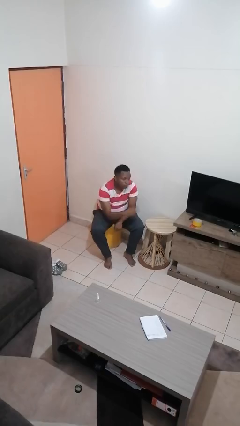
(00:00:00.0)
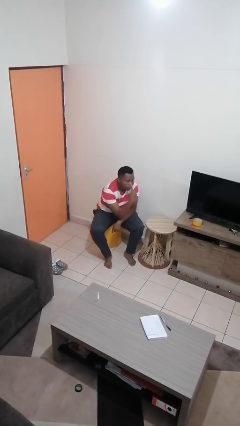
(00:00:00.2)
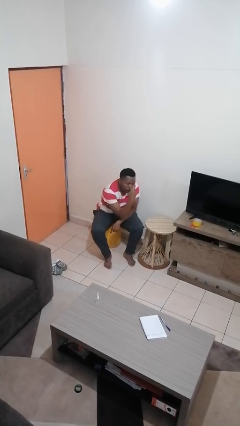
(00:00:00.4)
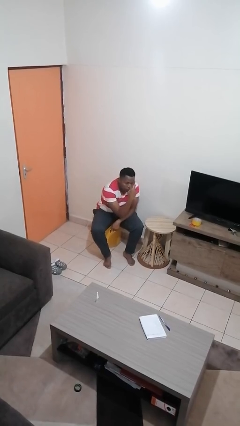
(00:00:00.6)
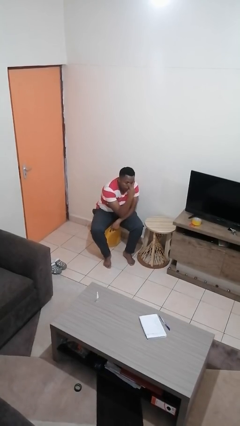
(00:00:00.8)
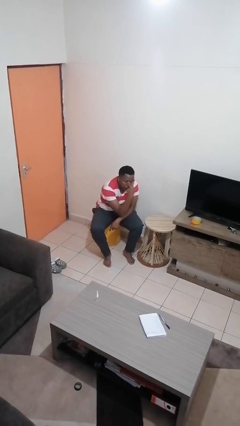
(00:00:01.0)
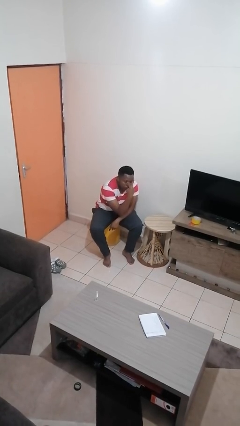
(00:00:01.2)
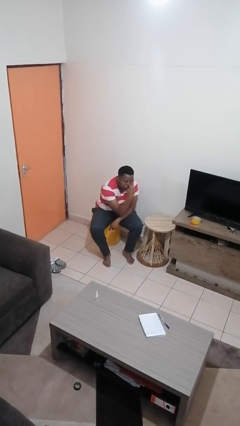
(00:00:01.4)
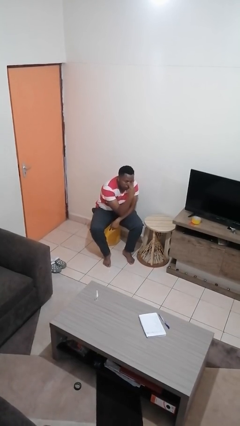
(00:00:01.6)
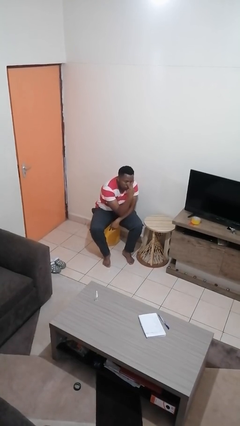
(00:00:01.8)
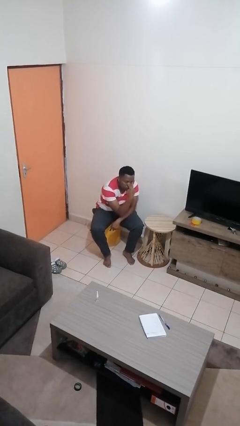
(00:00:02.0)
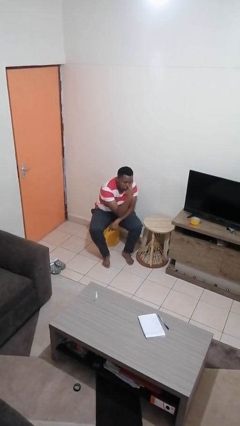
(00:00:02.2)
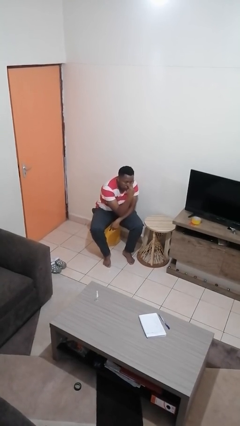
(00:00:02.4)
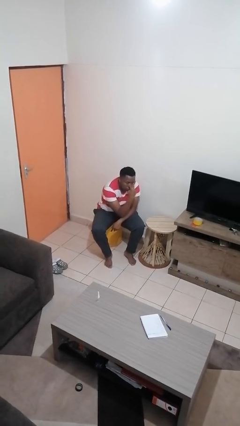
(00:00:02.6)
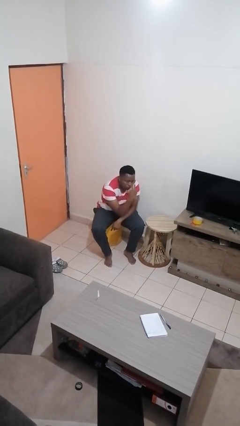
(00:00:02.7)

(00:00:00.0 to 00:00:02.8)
person gestures watch closely

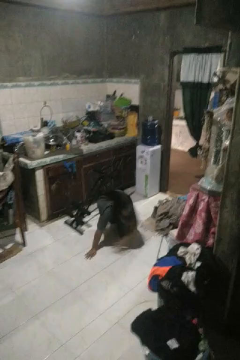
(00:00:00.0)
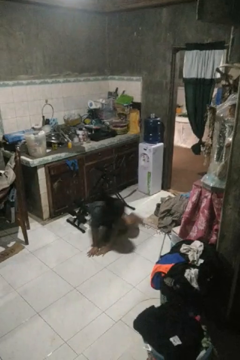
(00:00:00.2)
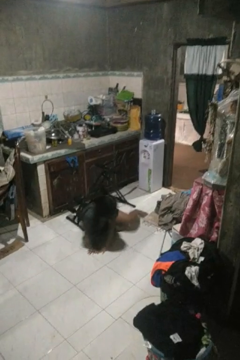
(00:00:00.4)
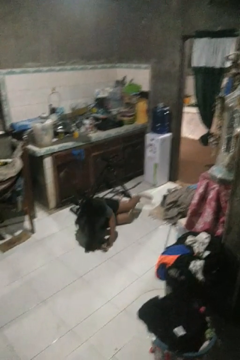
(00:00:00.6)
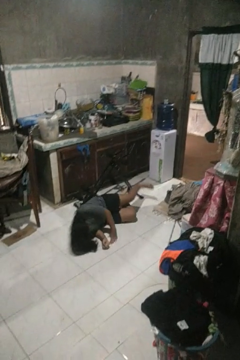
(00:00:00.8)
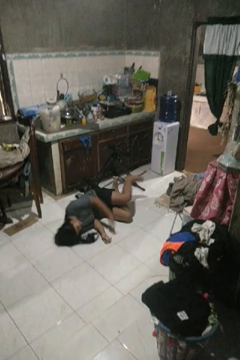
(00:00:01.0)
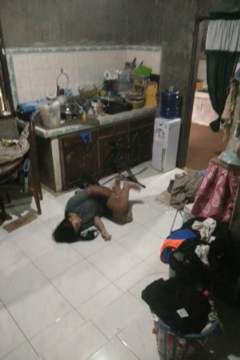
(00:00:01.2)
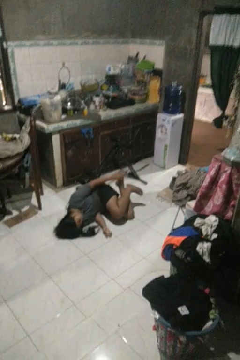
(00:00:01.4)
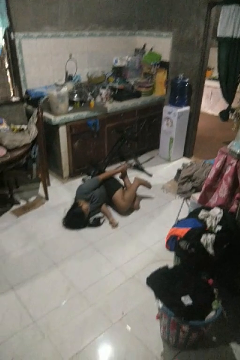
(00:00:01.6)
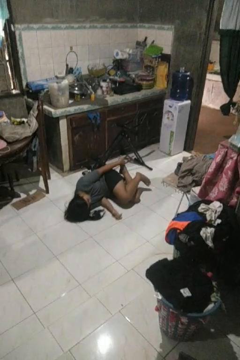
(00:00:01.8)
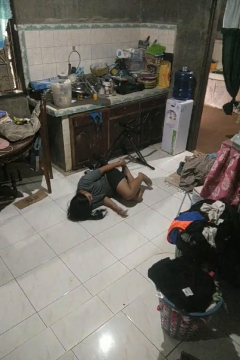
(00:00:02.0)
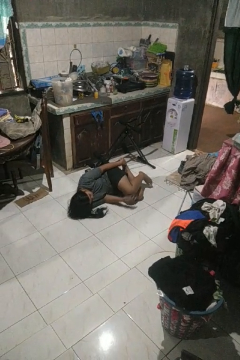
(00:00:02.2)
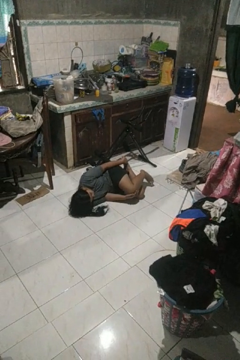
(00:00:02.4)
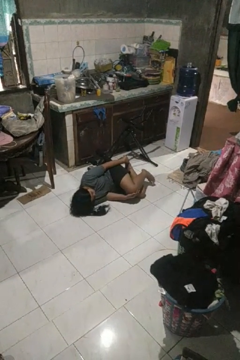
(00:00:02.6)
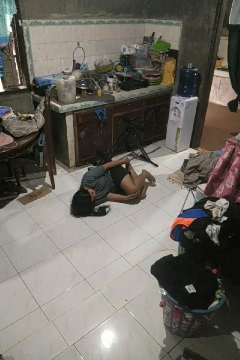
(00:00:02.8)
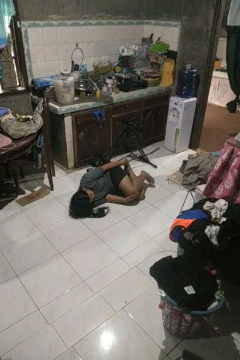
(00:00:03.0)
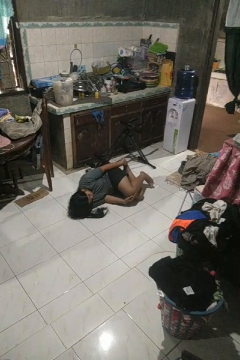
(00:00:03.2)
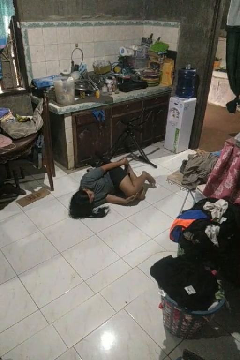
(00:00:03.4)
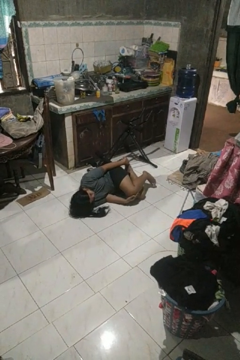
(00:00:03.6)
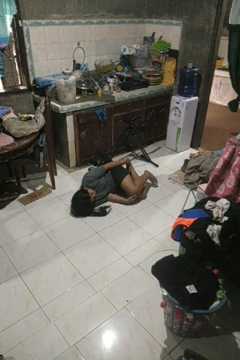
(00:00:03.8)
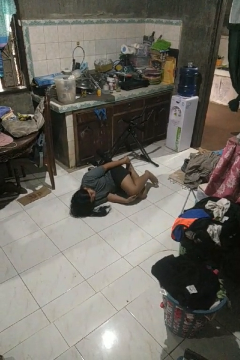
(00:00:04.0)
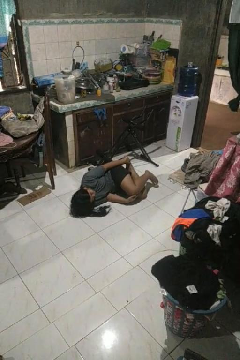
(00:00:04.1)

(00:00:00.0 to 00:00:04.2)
person lies down on floor

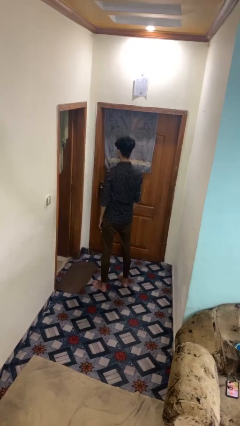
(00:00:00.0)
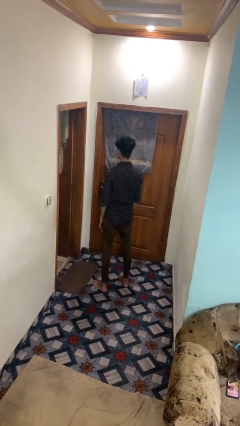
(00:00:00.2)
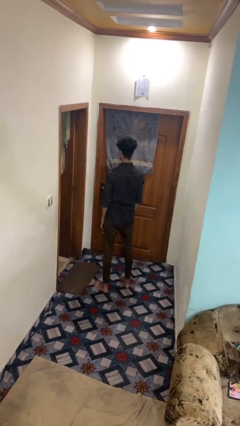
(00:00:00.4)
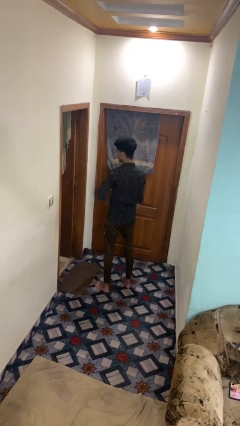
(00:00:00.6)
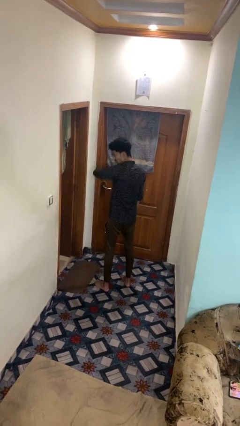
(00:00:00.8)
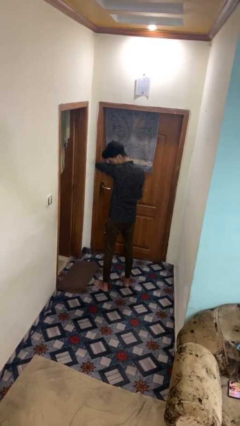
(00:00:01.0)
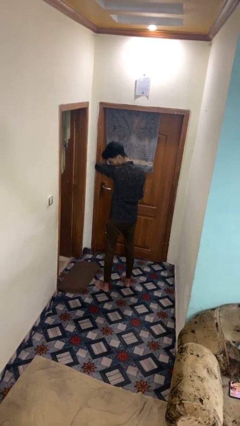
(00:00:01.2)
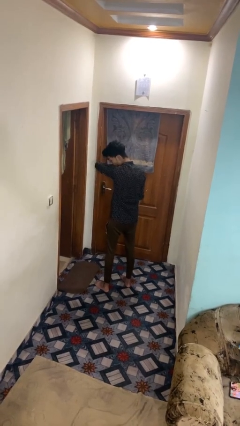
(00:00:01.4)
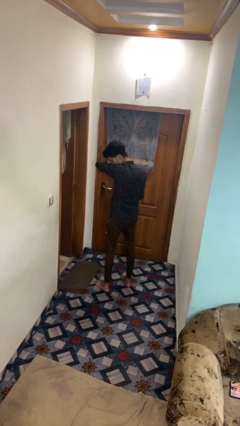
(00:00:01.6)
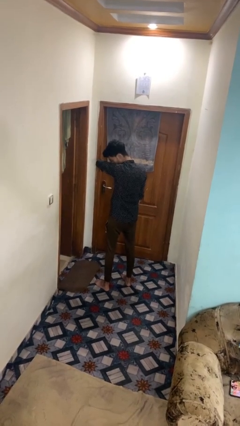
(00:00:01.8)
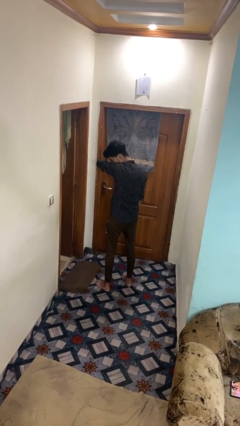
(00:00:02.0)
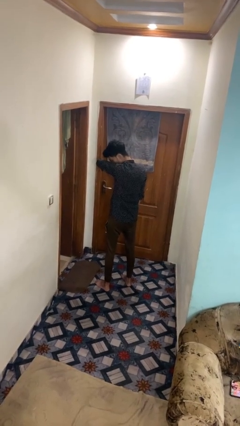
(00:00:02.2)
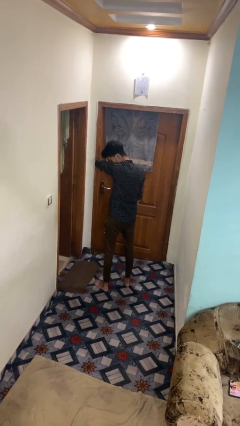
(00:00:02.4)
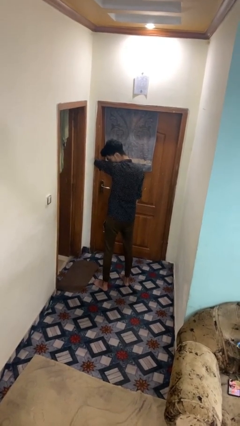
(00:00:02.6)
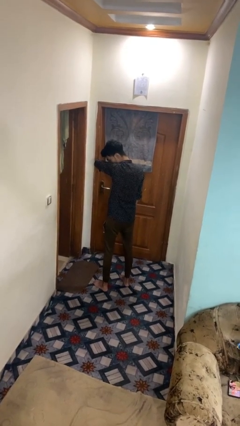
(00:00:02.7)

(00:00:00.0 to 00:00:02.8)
person sneezes into arm

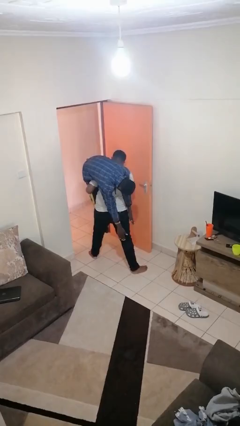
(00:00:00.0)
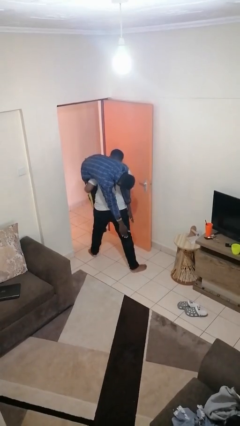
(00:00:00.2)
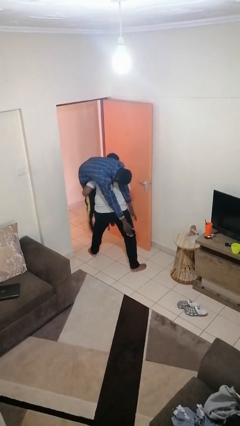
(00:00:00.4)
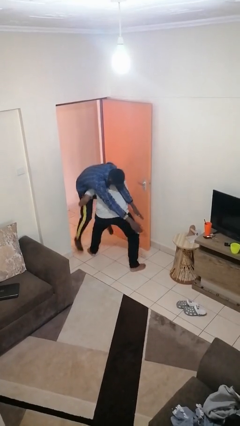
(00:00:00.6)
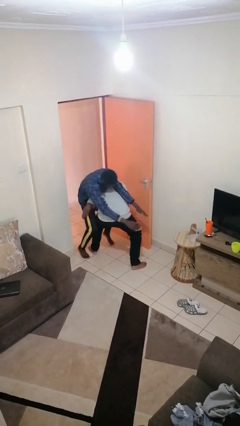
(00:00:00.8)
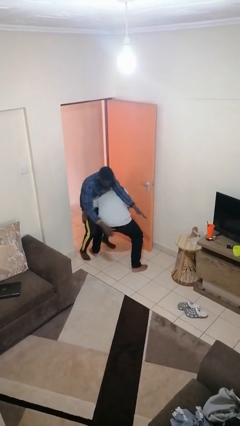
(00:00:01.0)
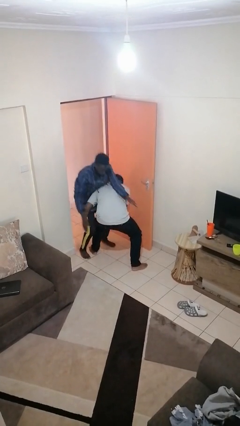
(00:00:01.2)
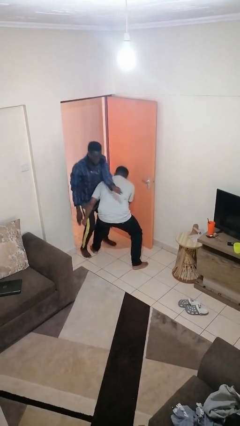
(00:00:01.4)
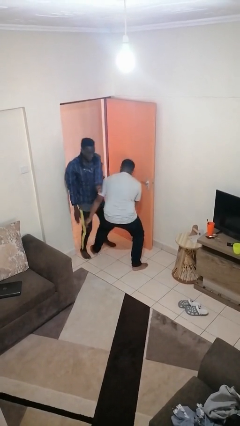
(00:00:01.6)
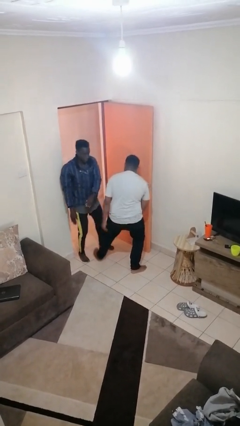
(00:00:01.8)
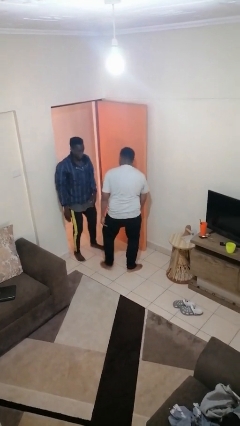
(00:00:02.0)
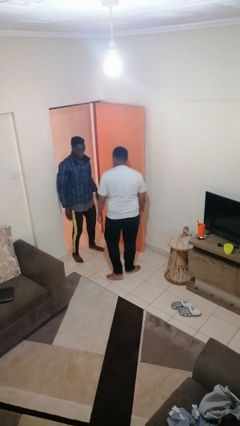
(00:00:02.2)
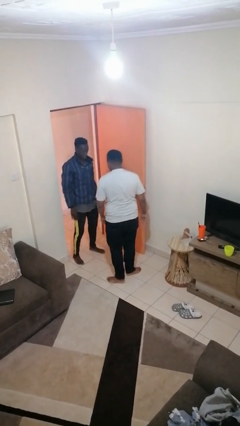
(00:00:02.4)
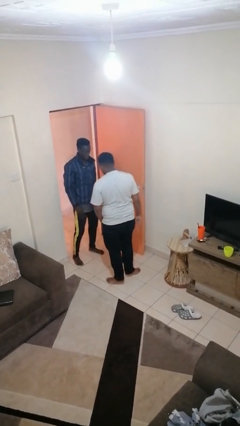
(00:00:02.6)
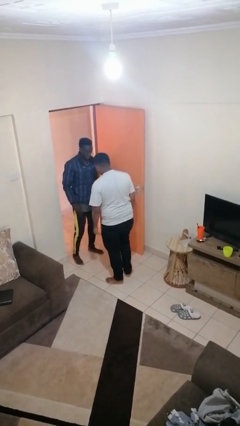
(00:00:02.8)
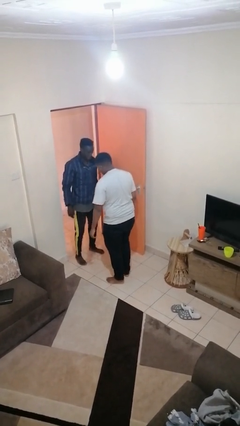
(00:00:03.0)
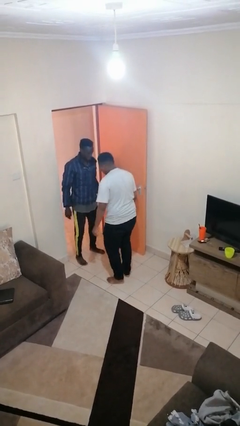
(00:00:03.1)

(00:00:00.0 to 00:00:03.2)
person puts down person

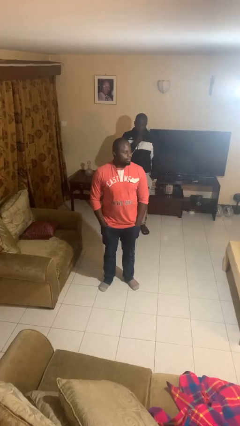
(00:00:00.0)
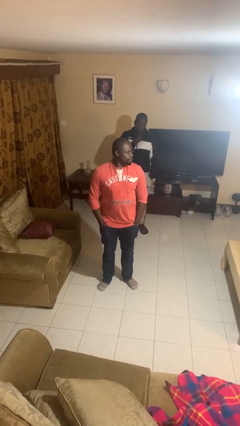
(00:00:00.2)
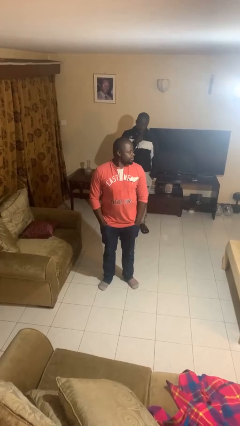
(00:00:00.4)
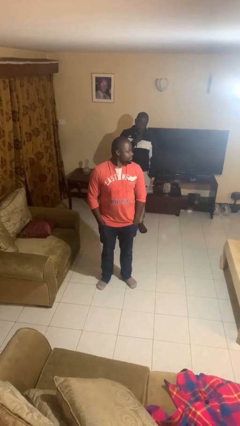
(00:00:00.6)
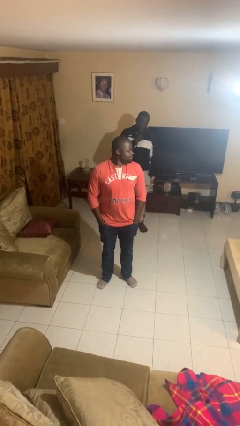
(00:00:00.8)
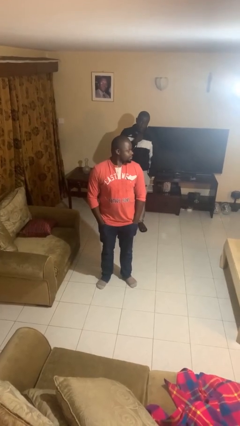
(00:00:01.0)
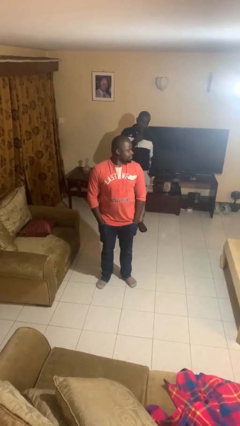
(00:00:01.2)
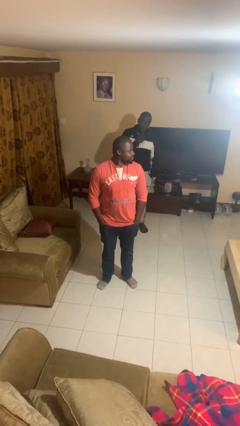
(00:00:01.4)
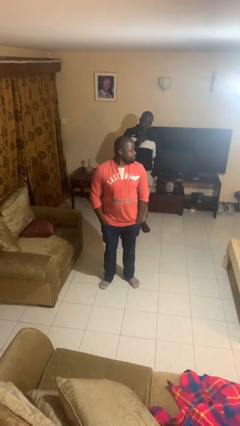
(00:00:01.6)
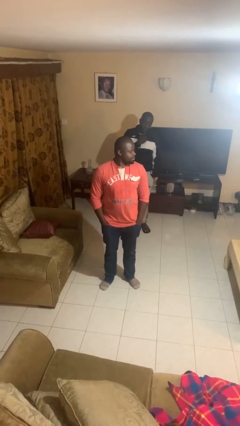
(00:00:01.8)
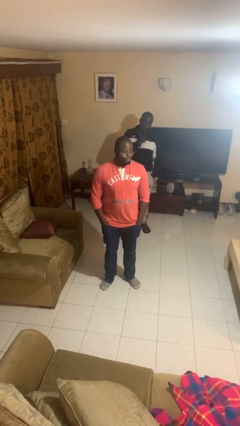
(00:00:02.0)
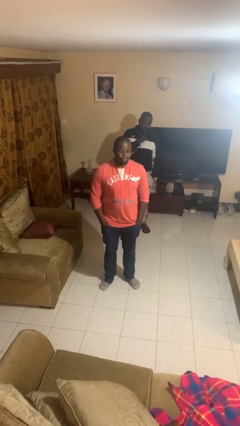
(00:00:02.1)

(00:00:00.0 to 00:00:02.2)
person looks over shoulder

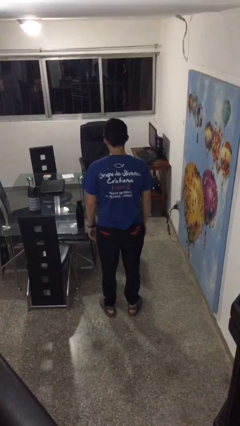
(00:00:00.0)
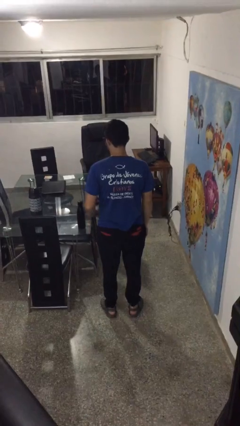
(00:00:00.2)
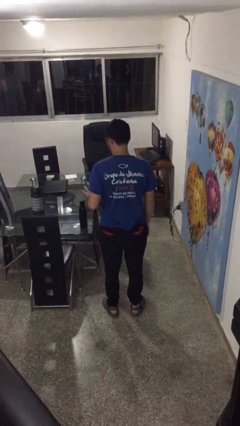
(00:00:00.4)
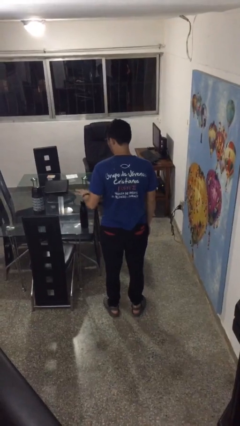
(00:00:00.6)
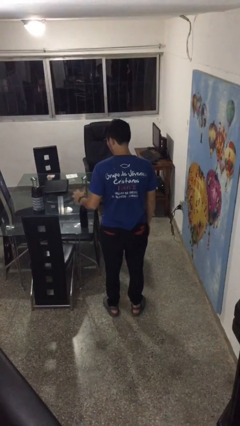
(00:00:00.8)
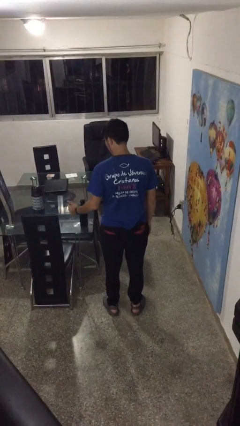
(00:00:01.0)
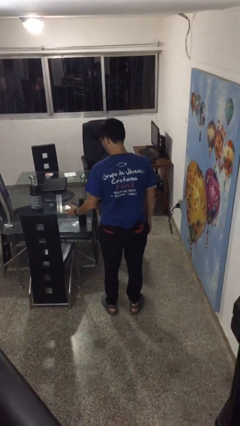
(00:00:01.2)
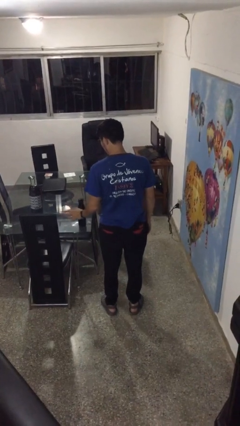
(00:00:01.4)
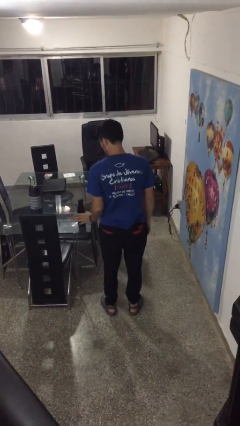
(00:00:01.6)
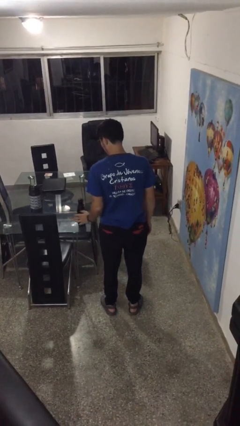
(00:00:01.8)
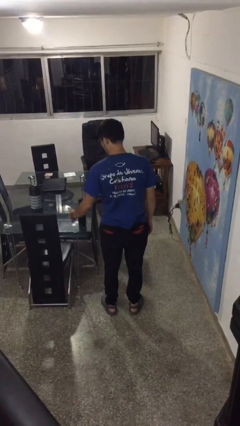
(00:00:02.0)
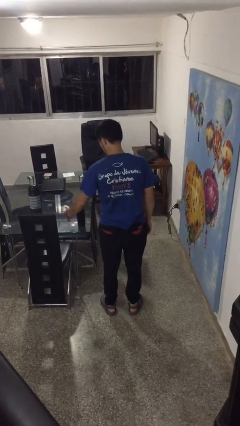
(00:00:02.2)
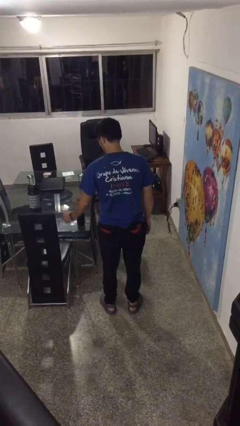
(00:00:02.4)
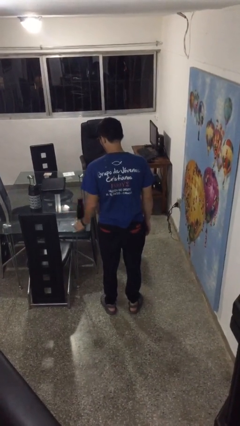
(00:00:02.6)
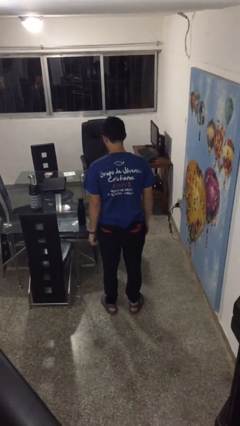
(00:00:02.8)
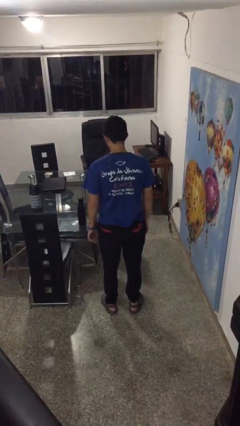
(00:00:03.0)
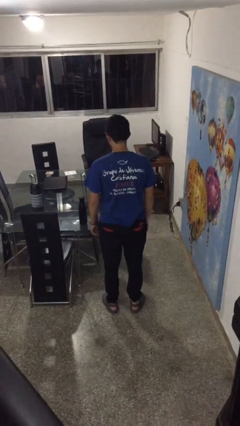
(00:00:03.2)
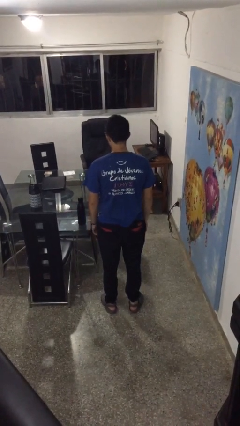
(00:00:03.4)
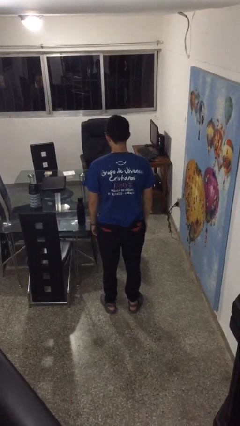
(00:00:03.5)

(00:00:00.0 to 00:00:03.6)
person waves hand over object
